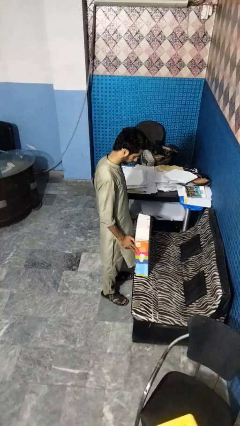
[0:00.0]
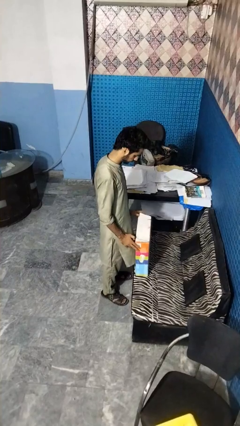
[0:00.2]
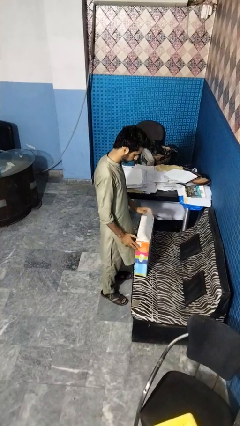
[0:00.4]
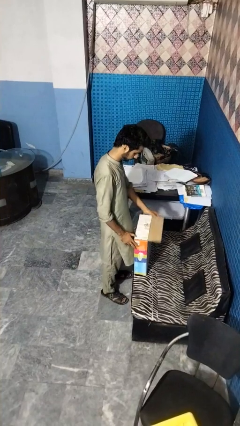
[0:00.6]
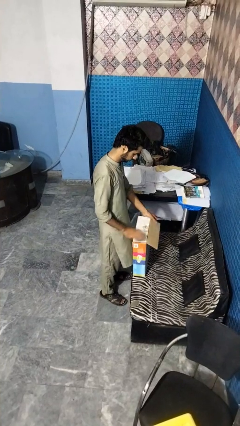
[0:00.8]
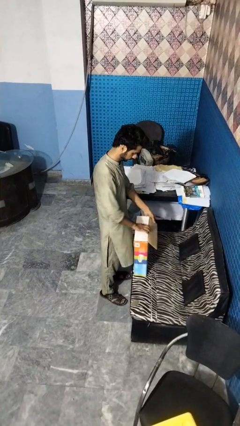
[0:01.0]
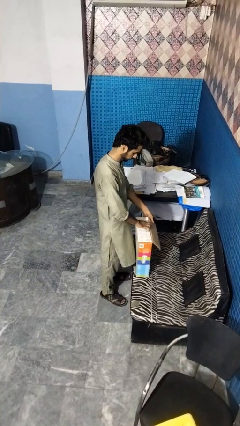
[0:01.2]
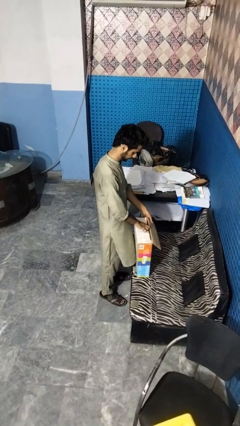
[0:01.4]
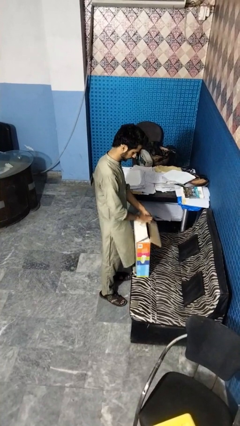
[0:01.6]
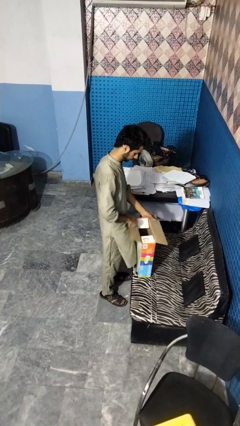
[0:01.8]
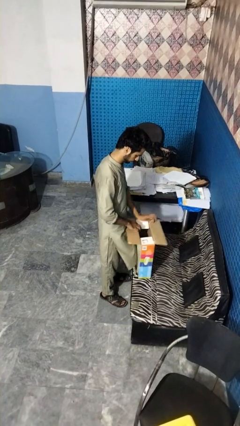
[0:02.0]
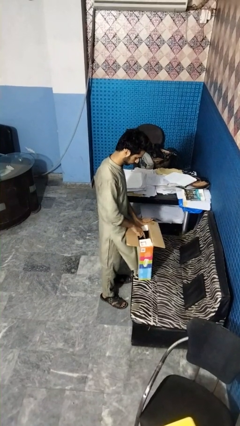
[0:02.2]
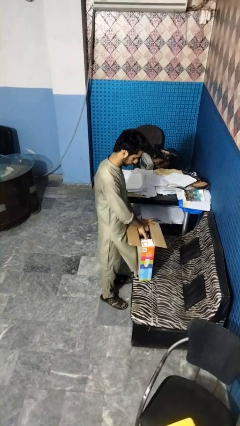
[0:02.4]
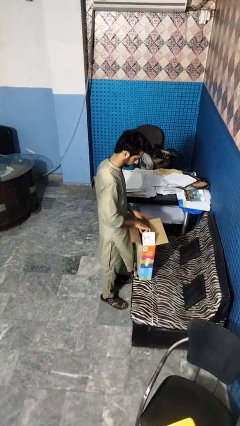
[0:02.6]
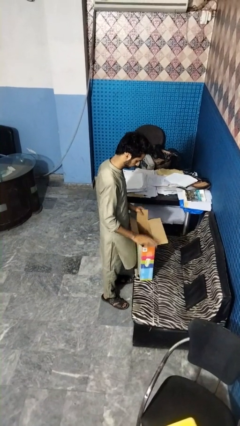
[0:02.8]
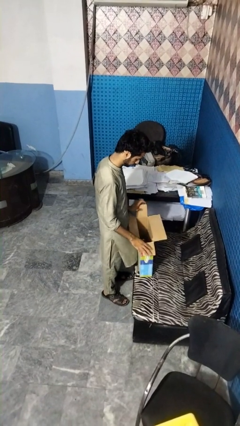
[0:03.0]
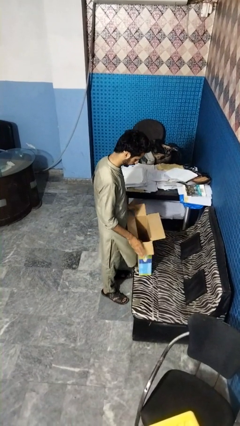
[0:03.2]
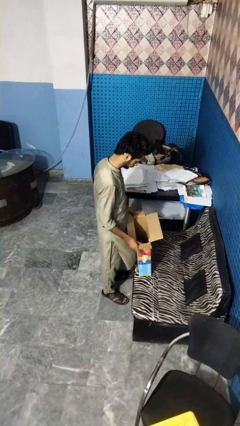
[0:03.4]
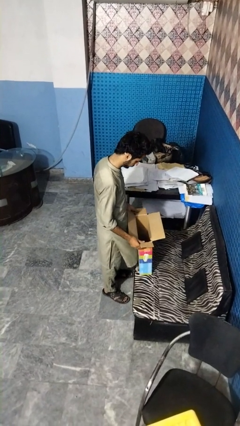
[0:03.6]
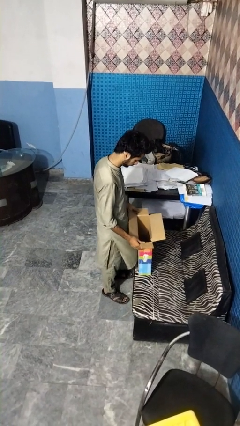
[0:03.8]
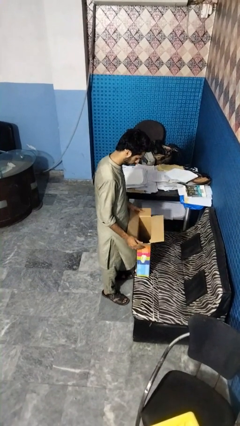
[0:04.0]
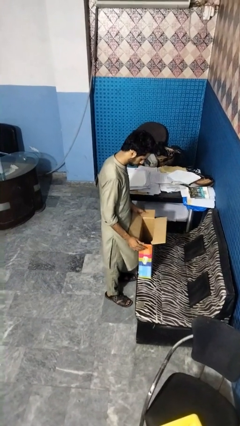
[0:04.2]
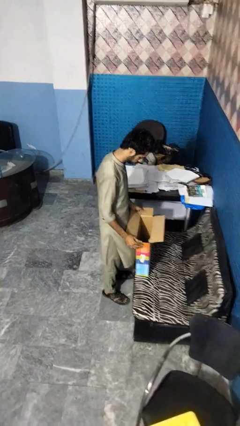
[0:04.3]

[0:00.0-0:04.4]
person opens box

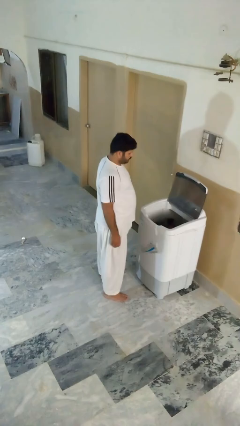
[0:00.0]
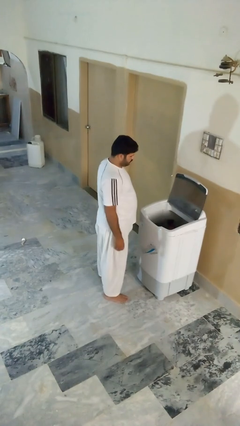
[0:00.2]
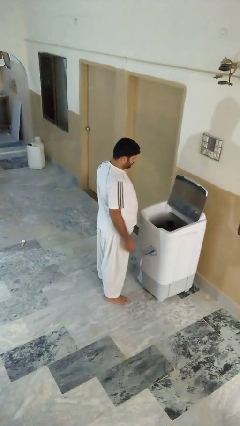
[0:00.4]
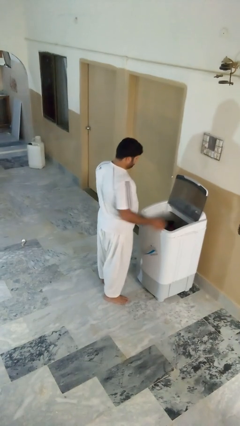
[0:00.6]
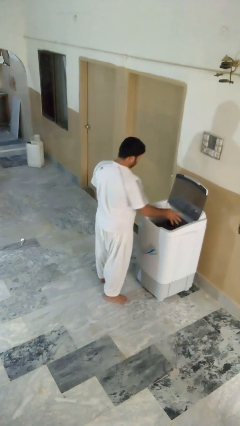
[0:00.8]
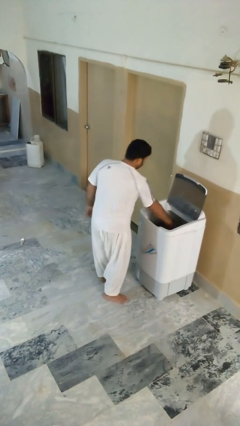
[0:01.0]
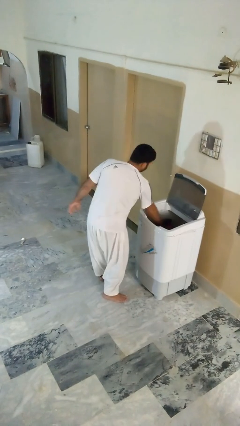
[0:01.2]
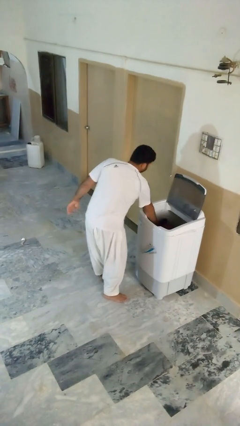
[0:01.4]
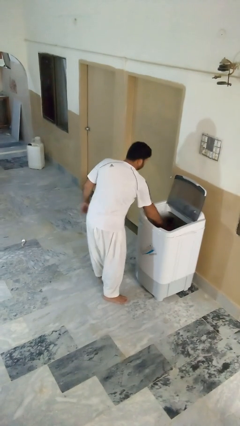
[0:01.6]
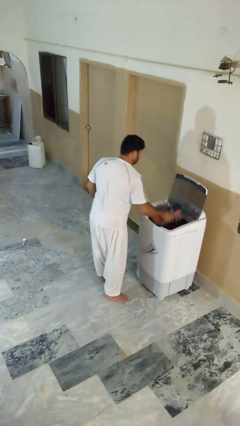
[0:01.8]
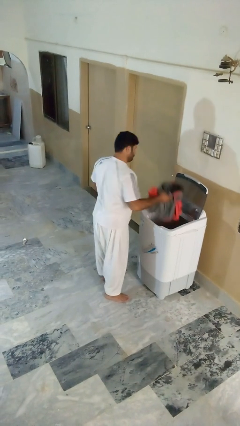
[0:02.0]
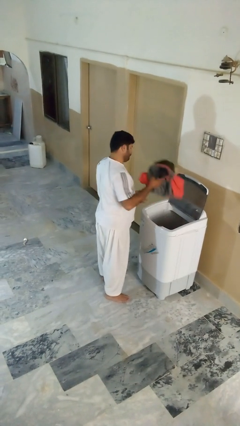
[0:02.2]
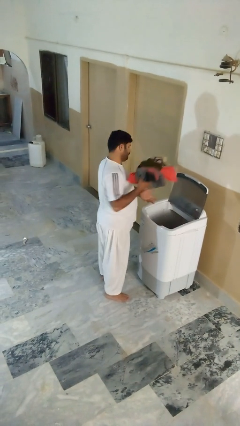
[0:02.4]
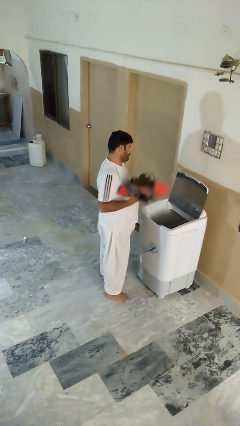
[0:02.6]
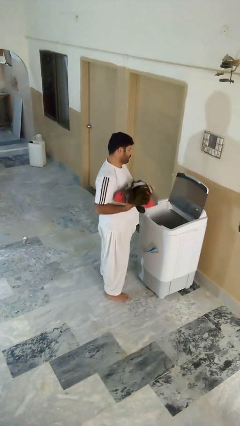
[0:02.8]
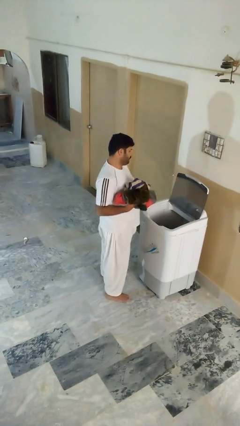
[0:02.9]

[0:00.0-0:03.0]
person unloads clotheswasher

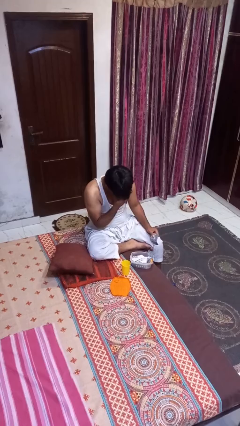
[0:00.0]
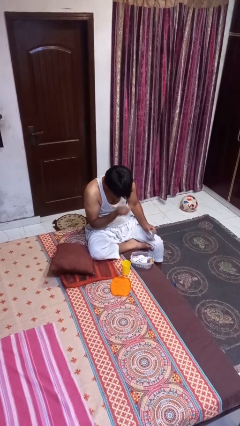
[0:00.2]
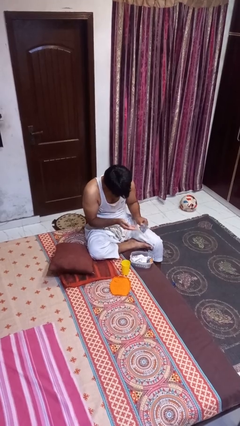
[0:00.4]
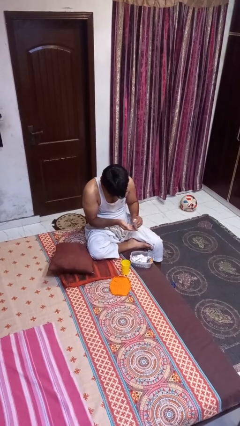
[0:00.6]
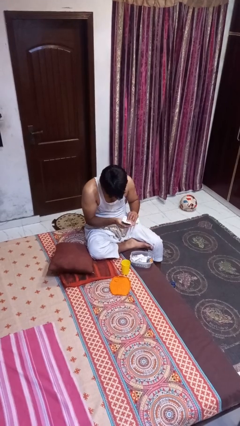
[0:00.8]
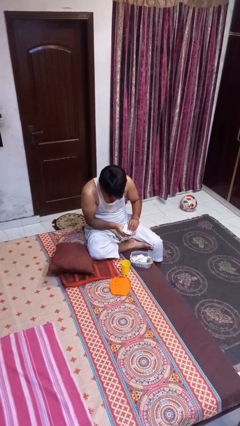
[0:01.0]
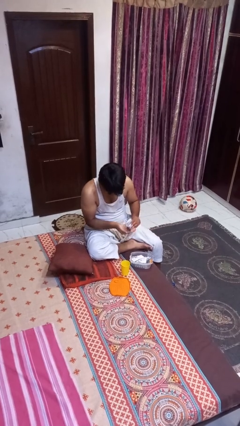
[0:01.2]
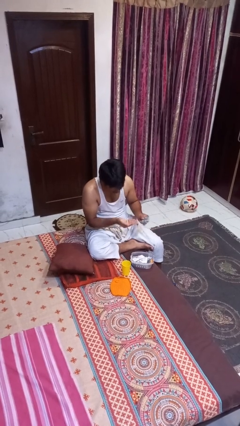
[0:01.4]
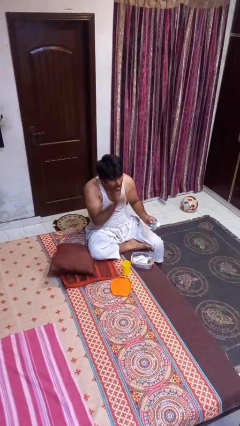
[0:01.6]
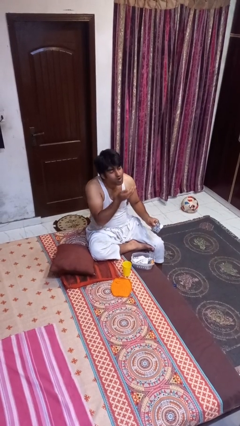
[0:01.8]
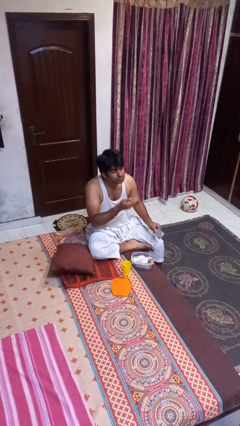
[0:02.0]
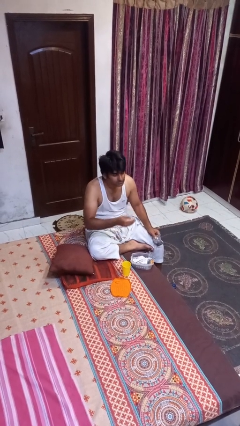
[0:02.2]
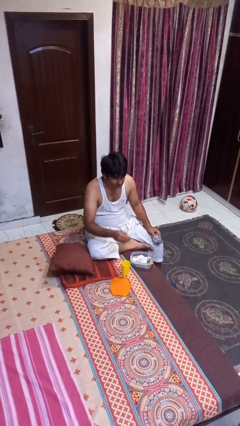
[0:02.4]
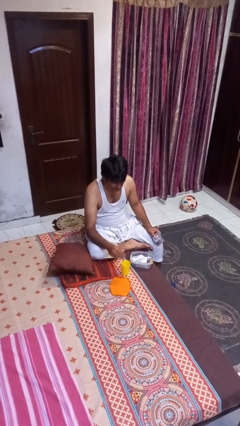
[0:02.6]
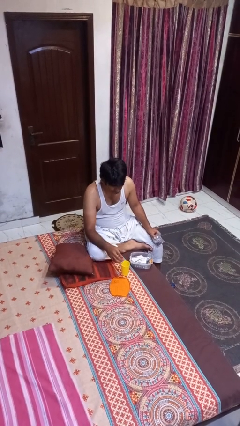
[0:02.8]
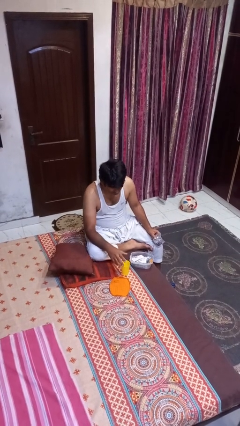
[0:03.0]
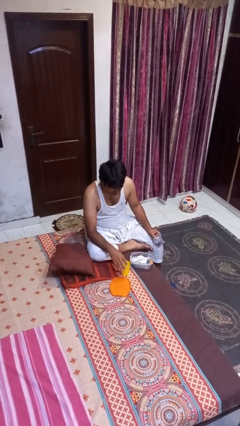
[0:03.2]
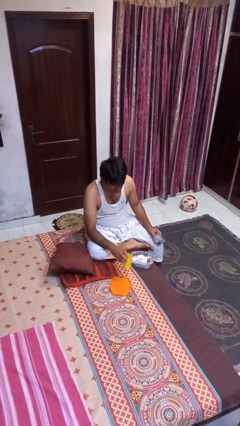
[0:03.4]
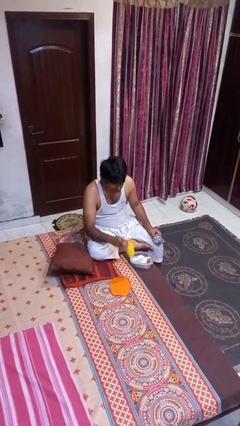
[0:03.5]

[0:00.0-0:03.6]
person takes medicine pills

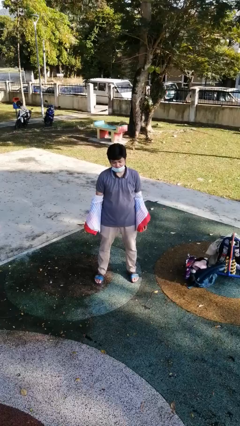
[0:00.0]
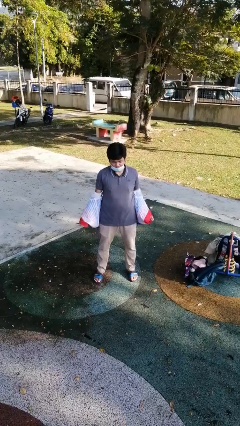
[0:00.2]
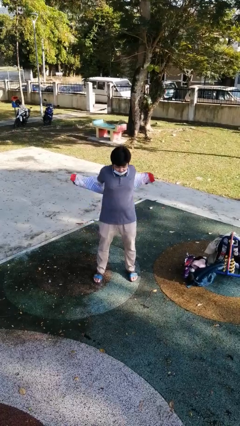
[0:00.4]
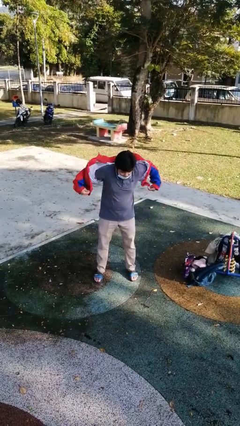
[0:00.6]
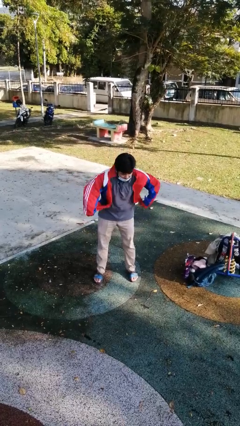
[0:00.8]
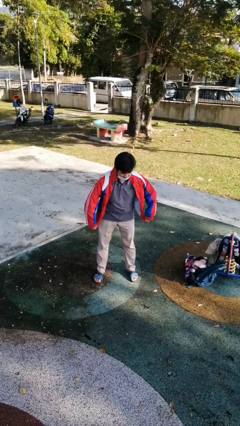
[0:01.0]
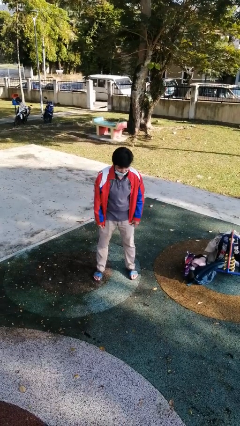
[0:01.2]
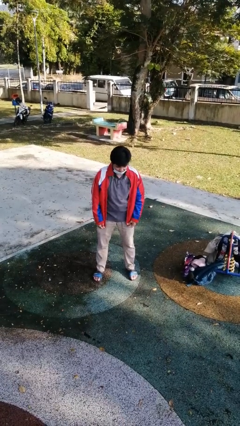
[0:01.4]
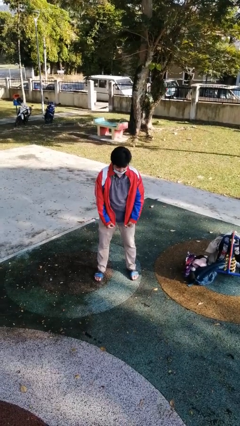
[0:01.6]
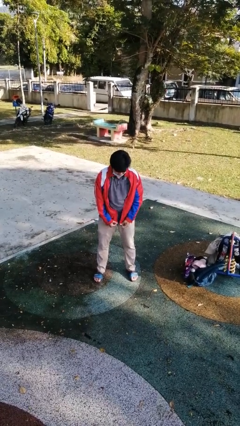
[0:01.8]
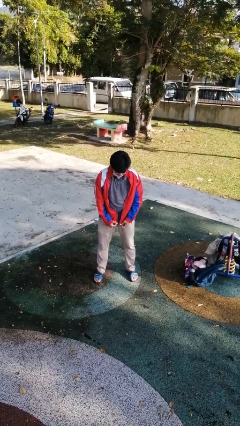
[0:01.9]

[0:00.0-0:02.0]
person puts on jacket

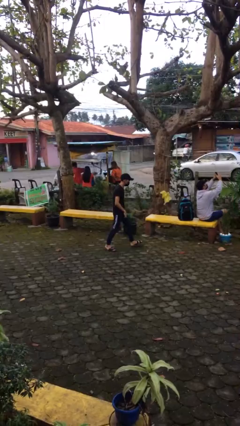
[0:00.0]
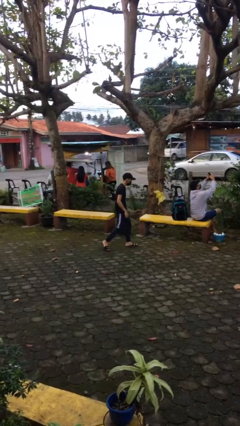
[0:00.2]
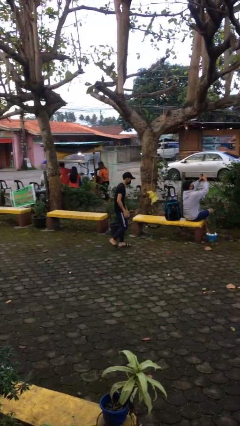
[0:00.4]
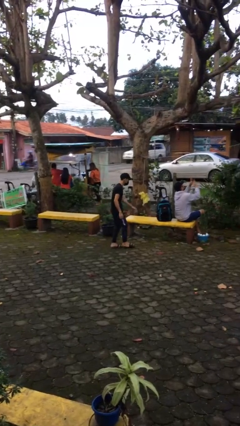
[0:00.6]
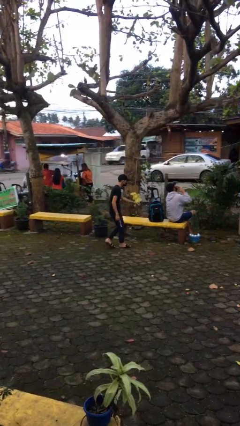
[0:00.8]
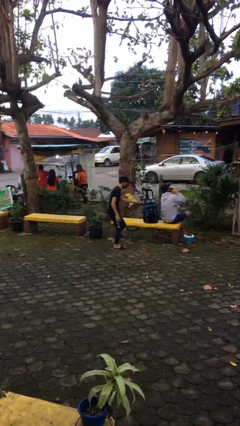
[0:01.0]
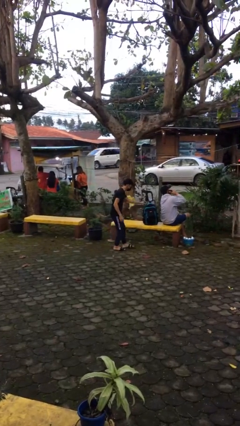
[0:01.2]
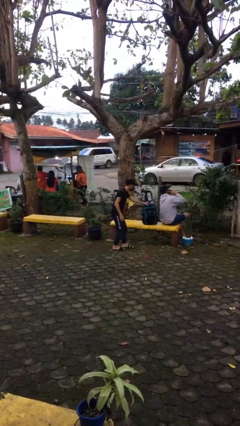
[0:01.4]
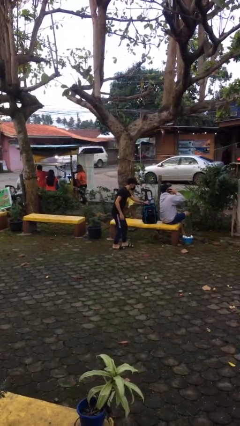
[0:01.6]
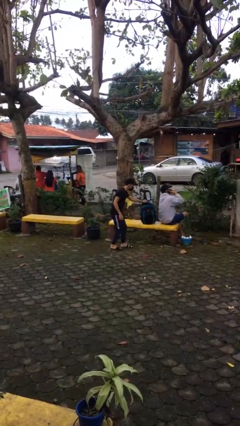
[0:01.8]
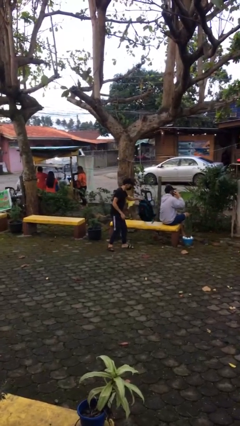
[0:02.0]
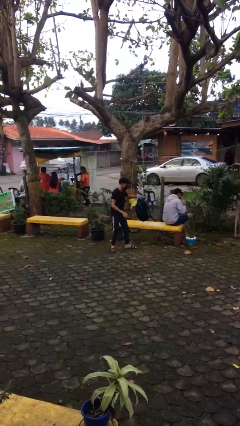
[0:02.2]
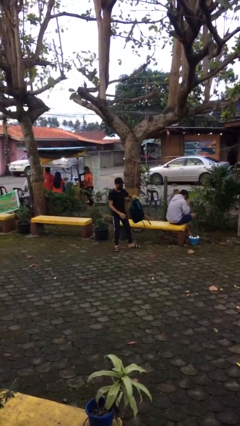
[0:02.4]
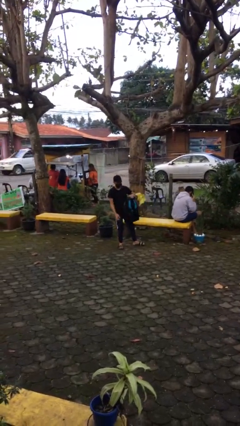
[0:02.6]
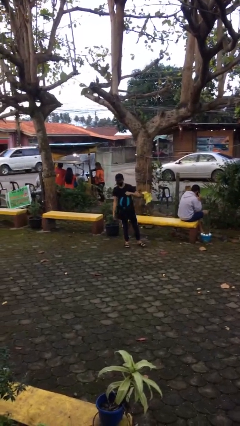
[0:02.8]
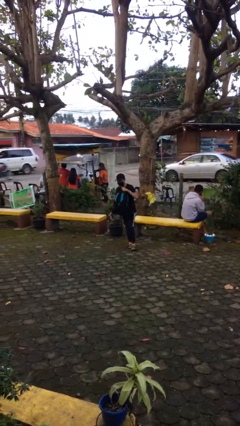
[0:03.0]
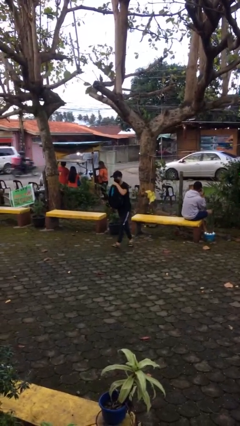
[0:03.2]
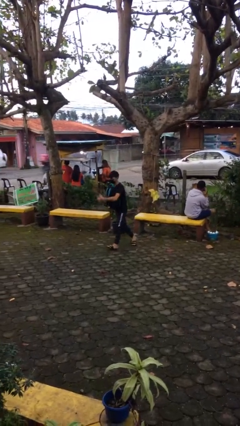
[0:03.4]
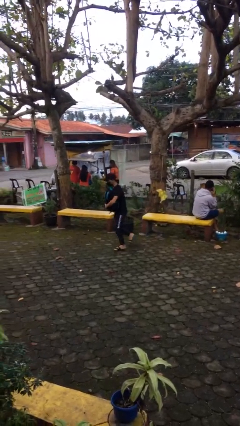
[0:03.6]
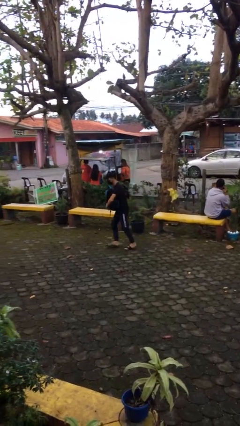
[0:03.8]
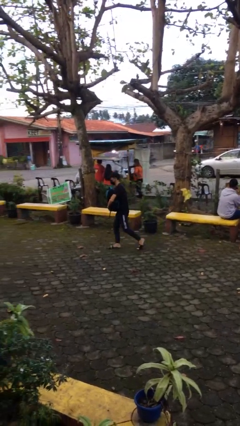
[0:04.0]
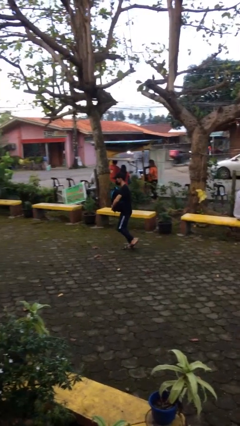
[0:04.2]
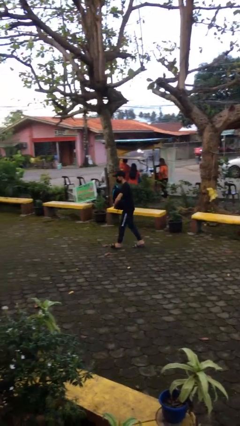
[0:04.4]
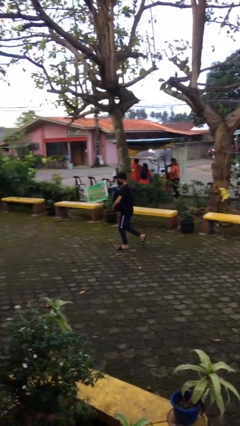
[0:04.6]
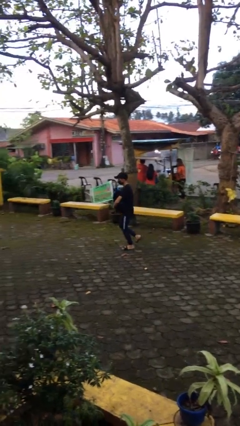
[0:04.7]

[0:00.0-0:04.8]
person steals object from person
